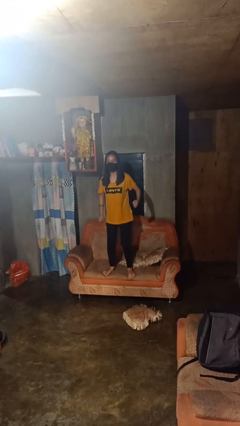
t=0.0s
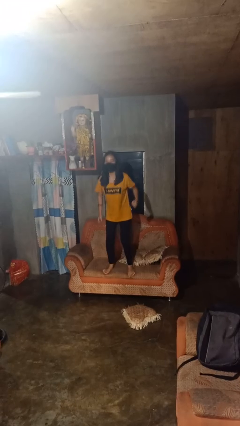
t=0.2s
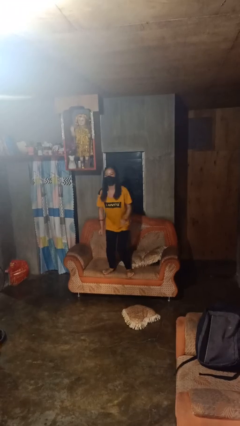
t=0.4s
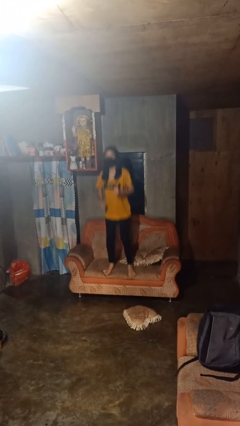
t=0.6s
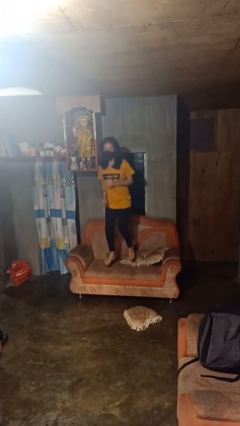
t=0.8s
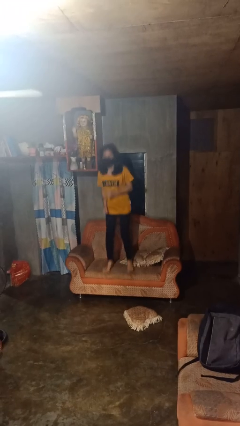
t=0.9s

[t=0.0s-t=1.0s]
person jumps on couch

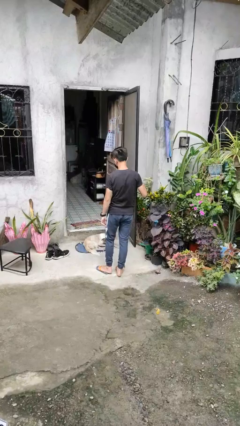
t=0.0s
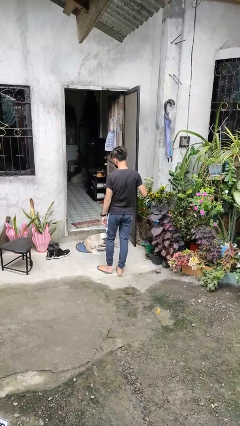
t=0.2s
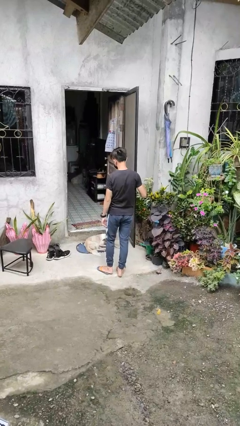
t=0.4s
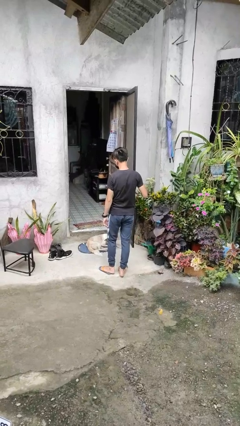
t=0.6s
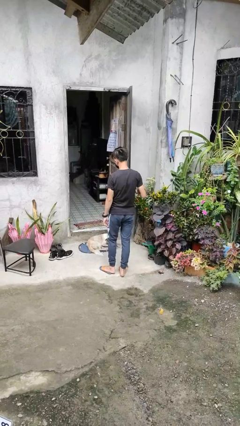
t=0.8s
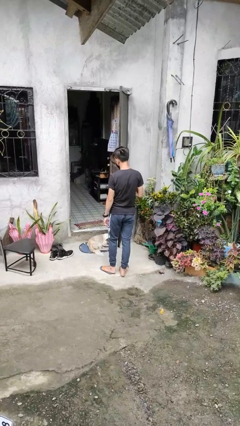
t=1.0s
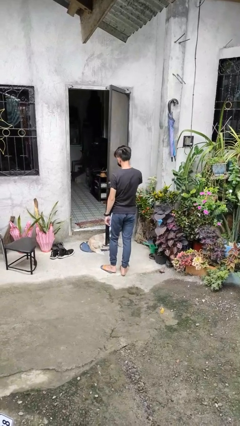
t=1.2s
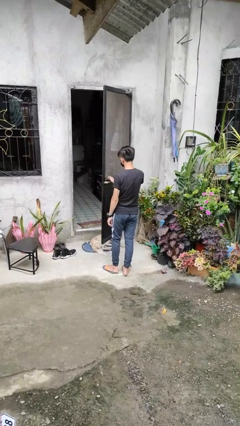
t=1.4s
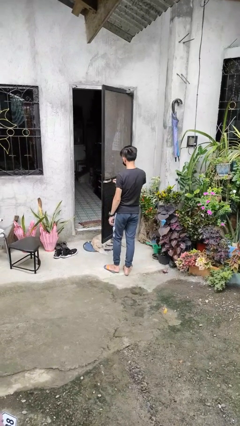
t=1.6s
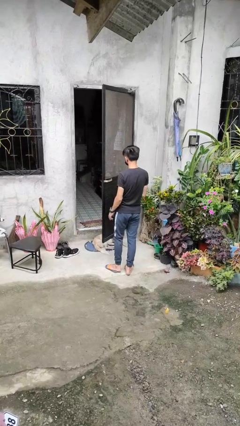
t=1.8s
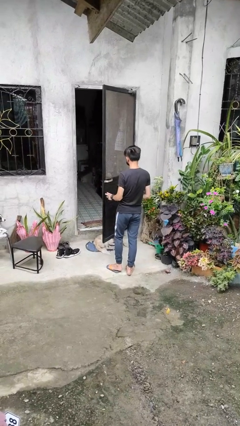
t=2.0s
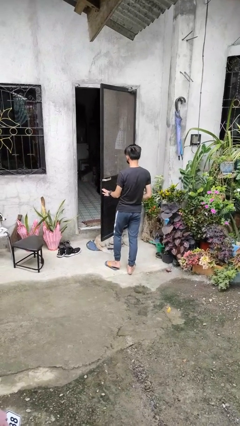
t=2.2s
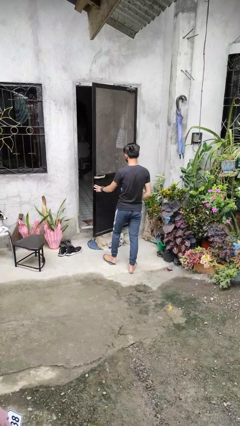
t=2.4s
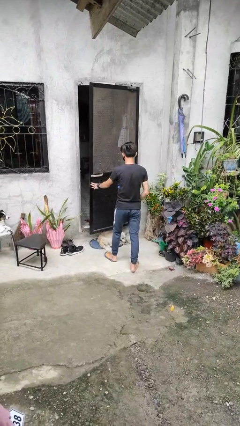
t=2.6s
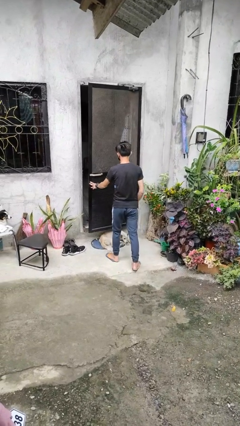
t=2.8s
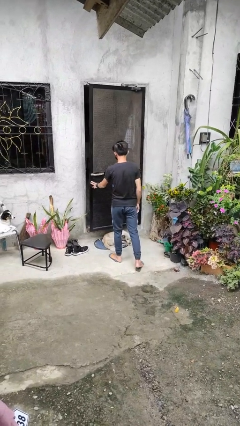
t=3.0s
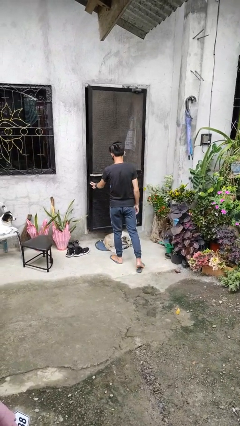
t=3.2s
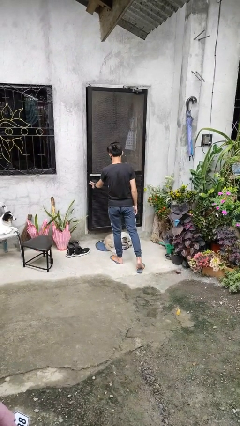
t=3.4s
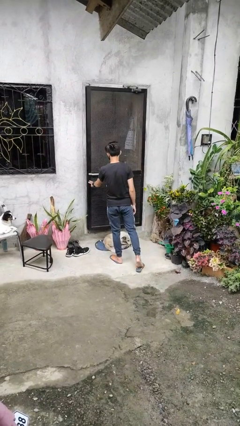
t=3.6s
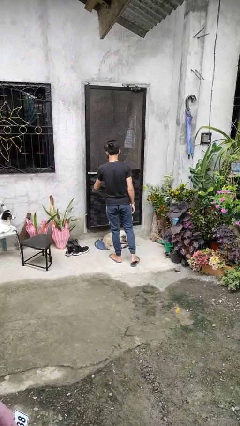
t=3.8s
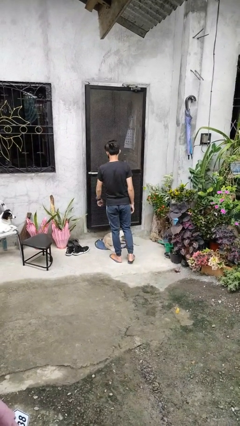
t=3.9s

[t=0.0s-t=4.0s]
person closes facility door

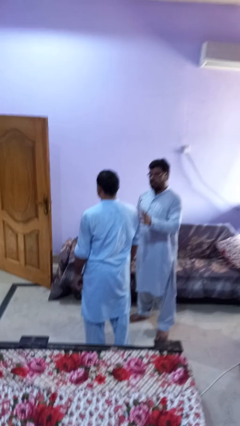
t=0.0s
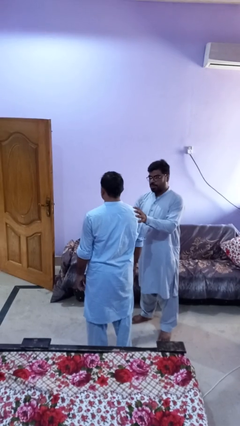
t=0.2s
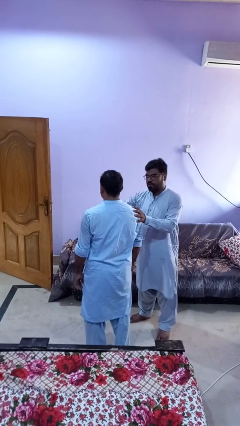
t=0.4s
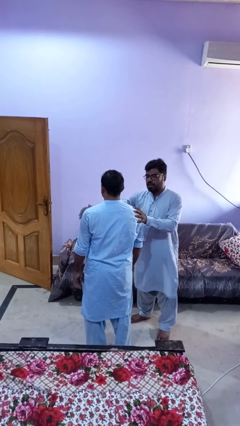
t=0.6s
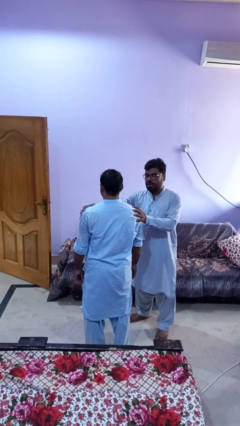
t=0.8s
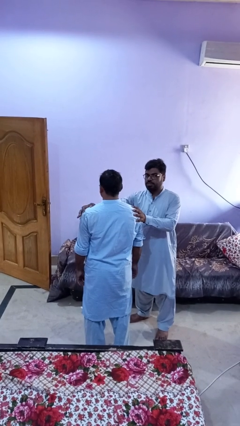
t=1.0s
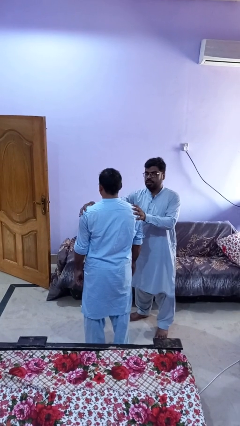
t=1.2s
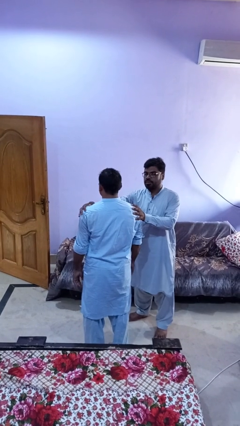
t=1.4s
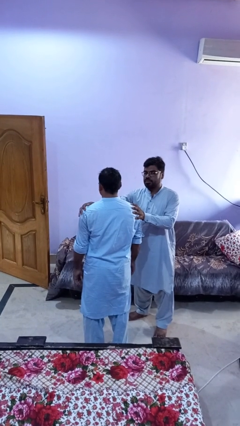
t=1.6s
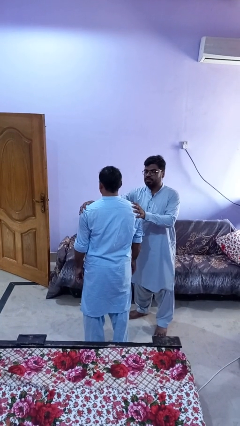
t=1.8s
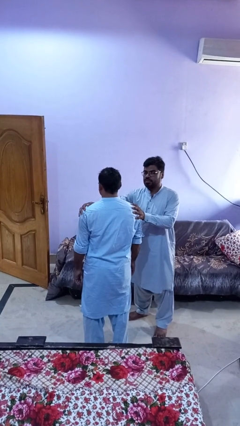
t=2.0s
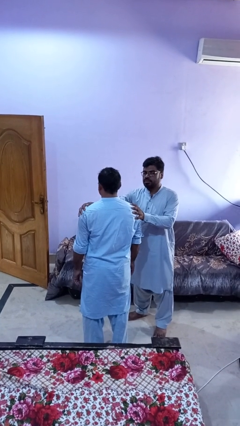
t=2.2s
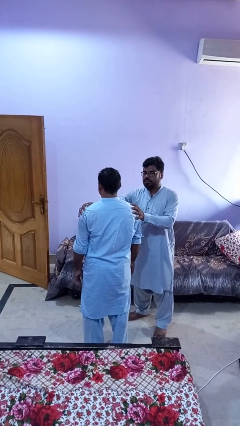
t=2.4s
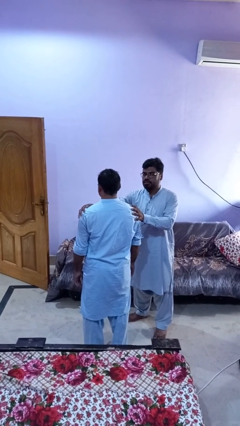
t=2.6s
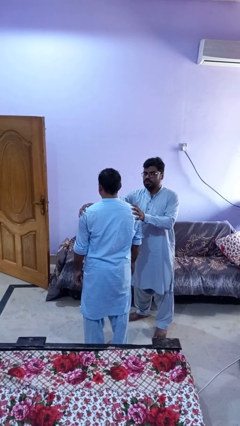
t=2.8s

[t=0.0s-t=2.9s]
person grabs person by shoulder

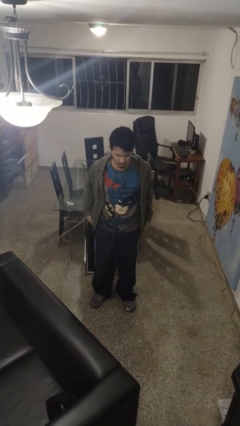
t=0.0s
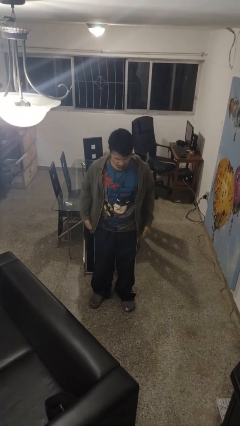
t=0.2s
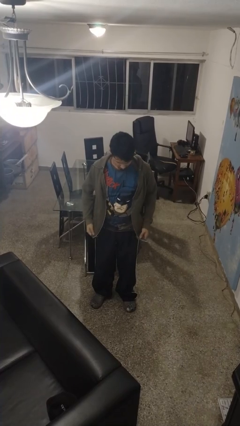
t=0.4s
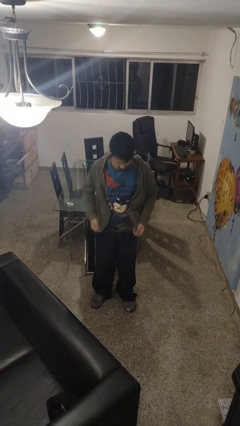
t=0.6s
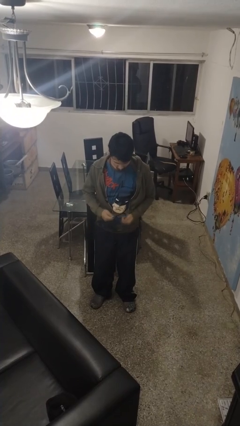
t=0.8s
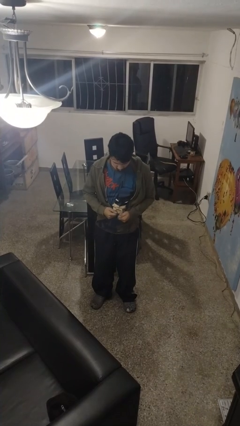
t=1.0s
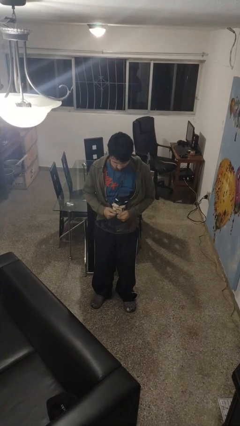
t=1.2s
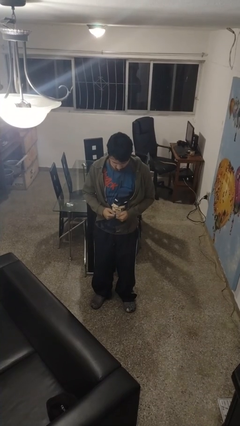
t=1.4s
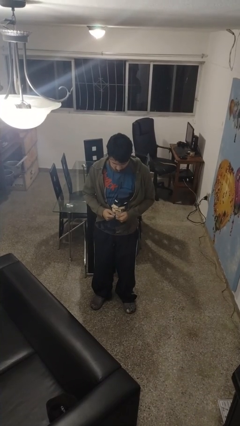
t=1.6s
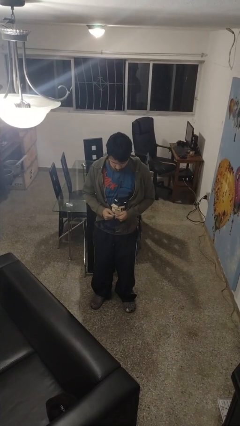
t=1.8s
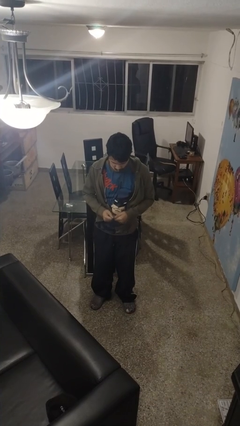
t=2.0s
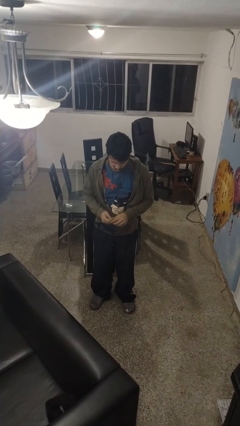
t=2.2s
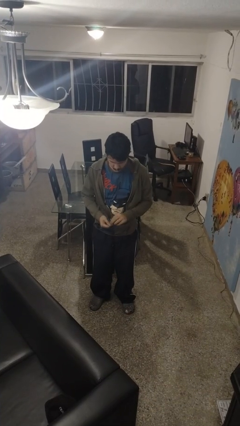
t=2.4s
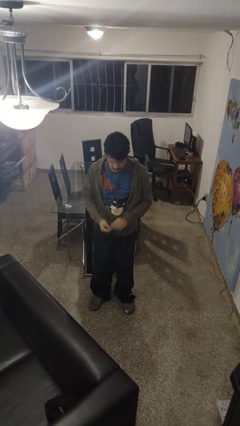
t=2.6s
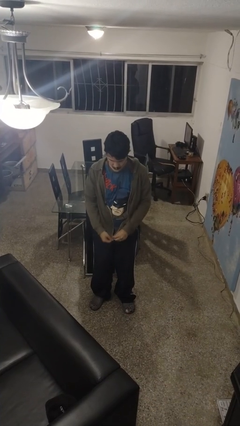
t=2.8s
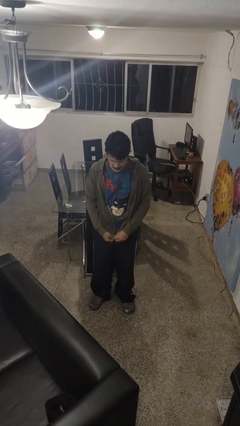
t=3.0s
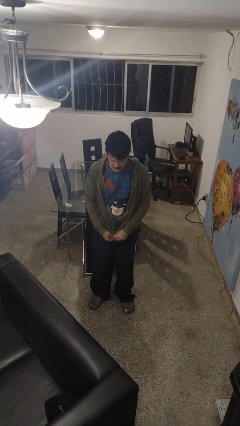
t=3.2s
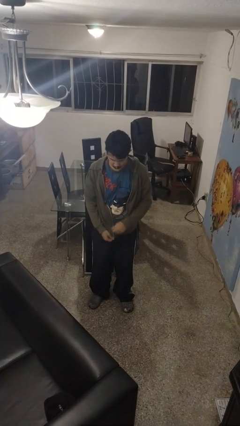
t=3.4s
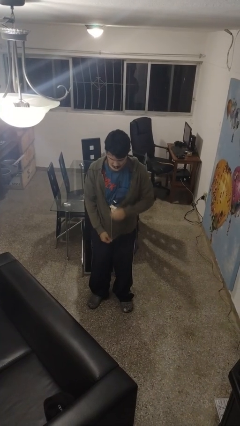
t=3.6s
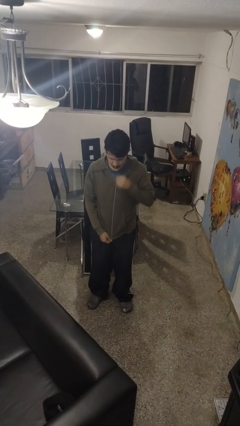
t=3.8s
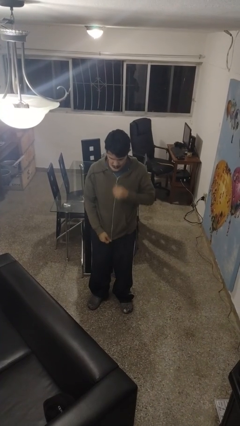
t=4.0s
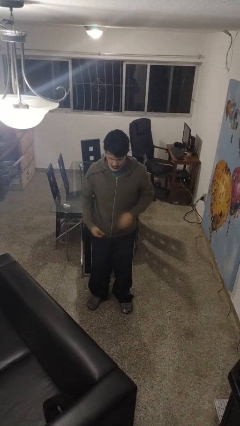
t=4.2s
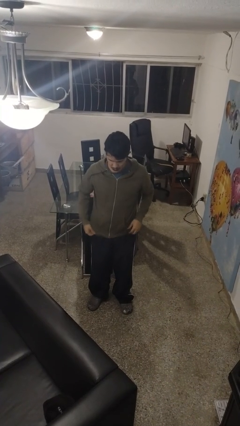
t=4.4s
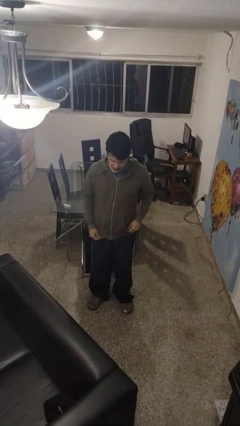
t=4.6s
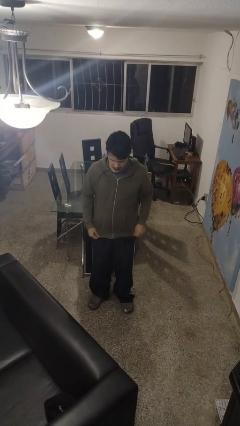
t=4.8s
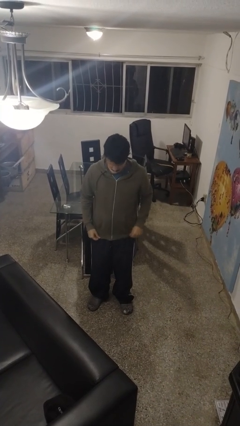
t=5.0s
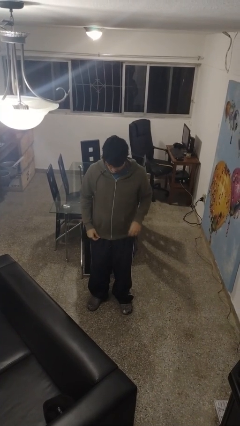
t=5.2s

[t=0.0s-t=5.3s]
person zips up jacket

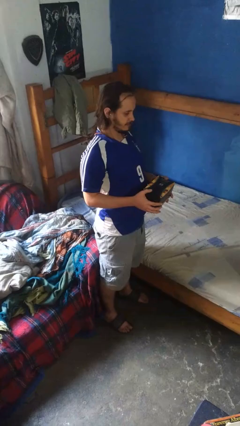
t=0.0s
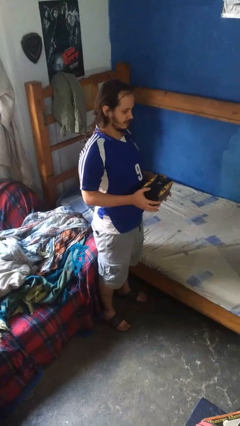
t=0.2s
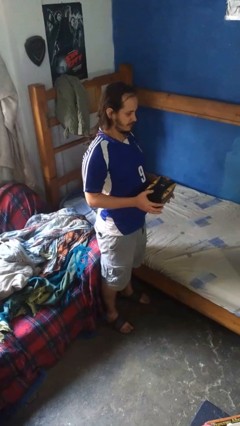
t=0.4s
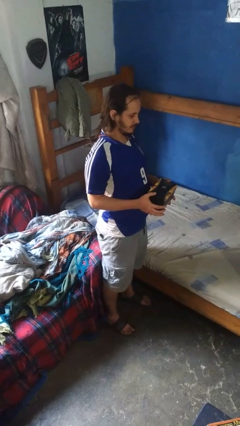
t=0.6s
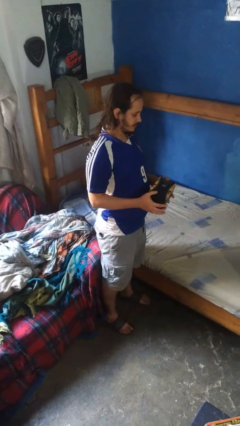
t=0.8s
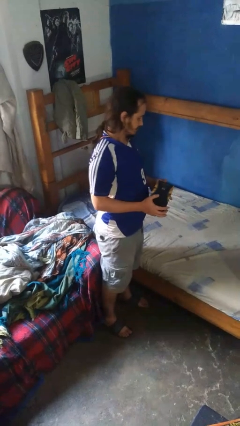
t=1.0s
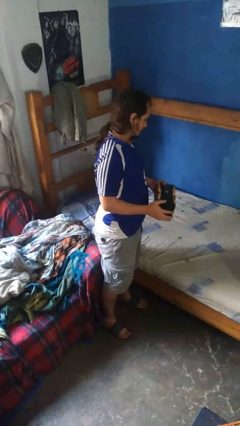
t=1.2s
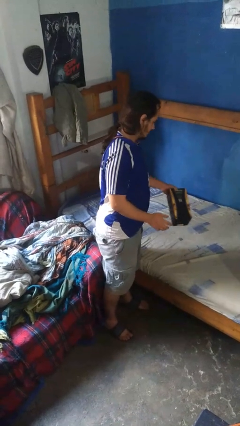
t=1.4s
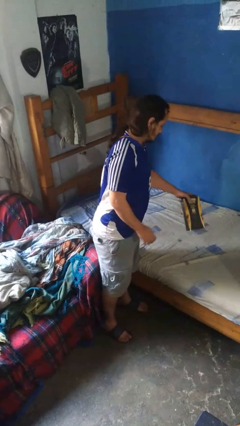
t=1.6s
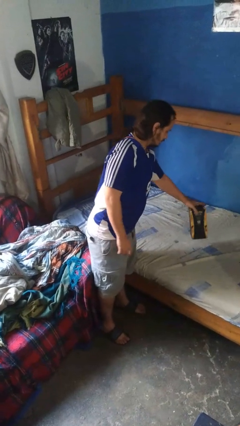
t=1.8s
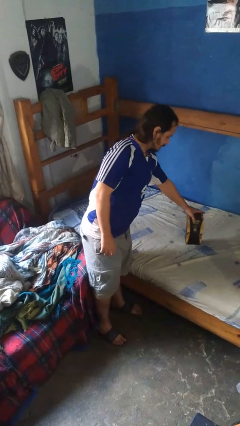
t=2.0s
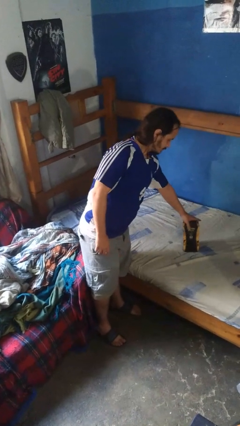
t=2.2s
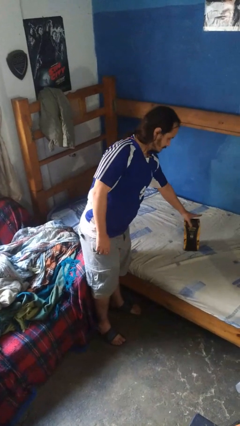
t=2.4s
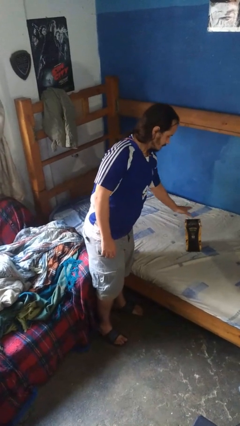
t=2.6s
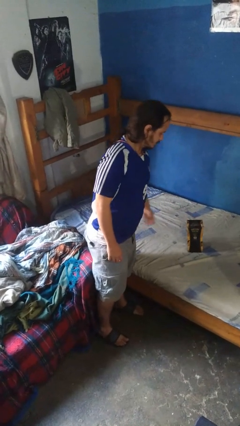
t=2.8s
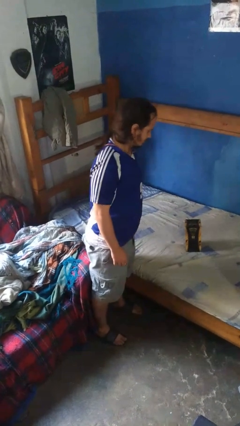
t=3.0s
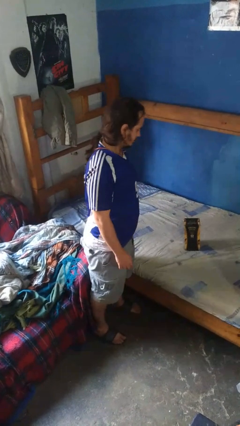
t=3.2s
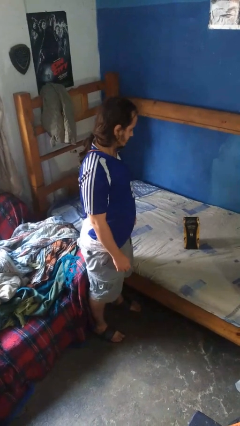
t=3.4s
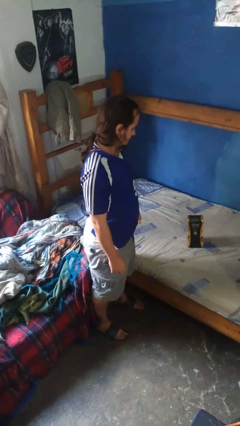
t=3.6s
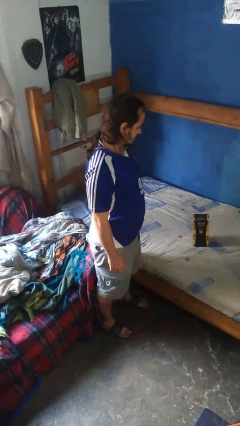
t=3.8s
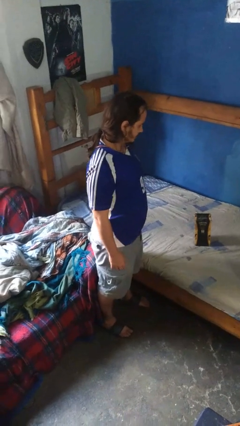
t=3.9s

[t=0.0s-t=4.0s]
person puts down object on bed

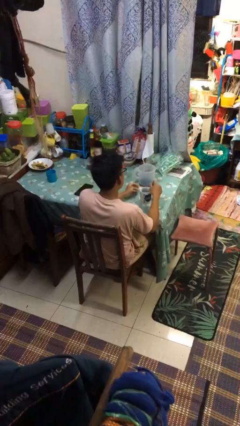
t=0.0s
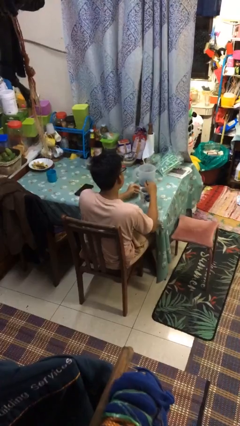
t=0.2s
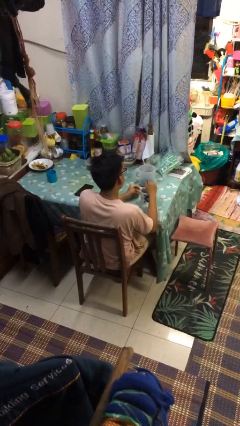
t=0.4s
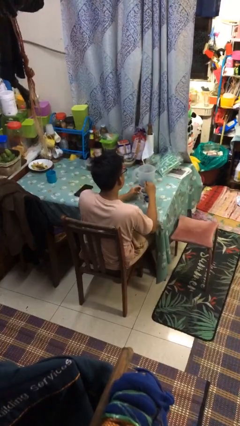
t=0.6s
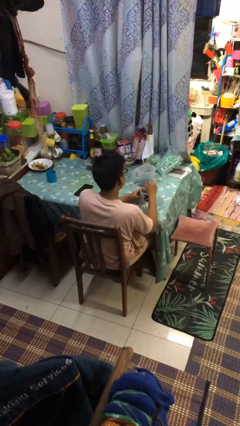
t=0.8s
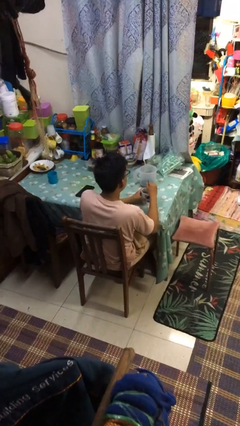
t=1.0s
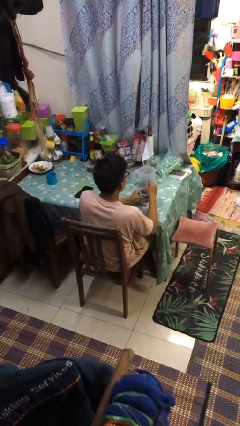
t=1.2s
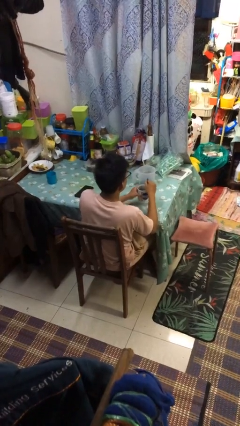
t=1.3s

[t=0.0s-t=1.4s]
person stirs mug
